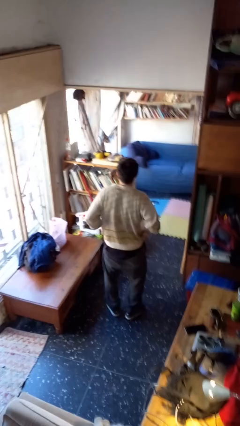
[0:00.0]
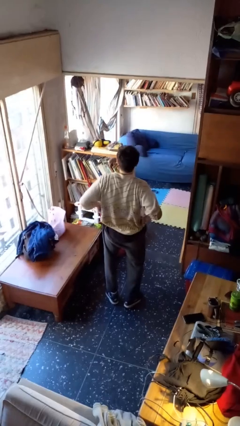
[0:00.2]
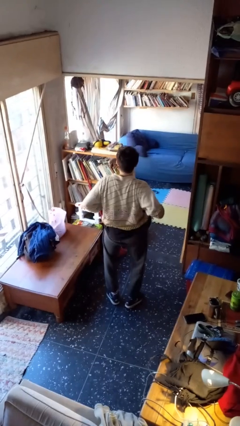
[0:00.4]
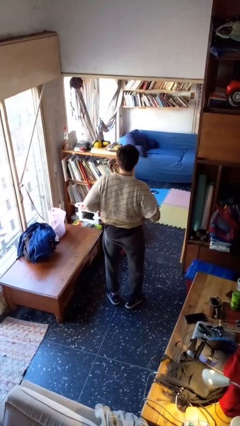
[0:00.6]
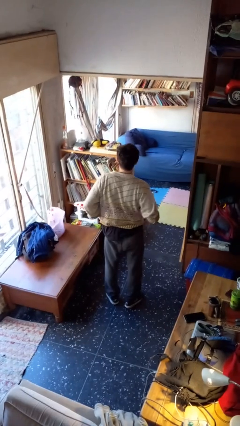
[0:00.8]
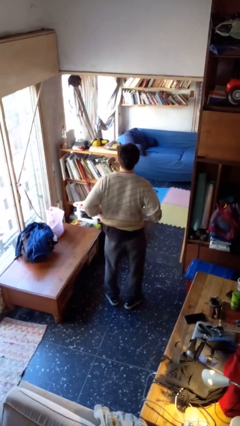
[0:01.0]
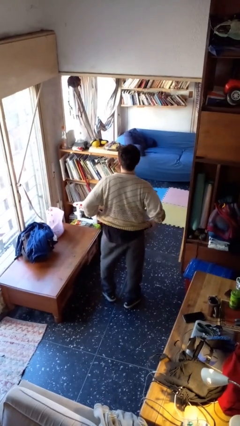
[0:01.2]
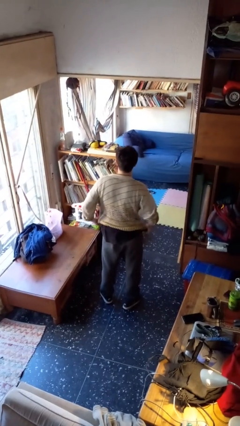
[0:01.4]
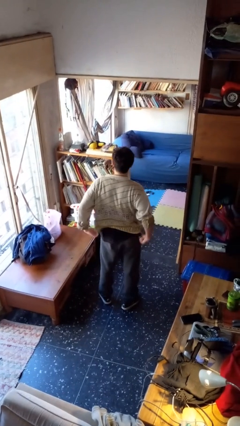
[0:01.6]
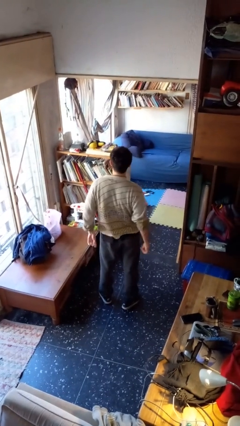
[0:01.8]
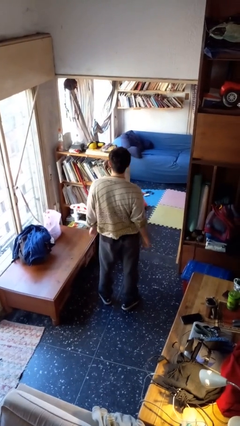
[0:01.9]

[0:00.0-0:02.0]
person hikes up pants

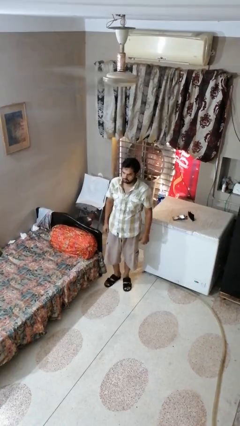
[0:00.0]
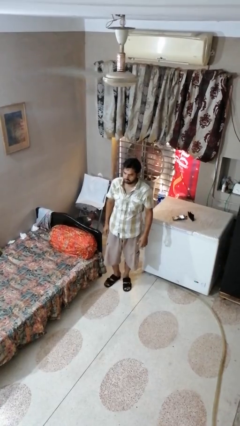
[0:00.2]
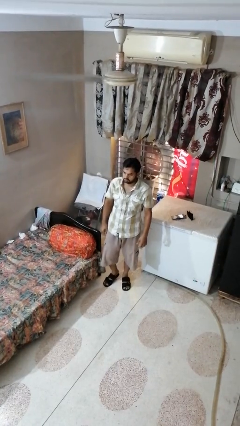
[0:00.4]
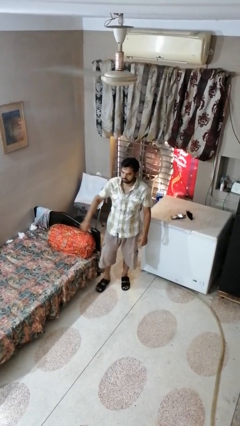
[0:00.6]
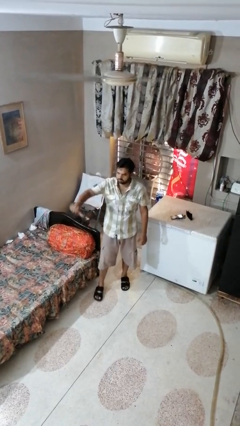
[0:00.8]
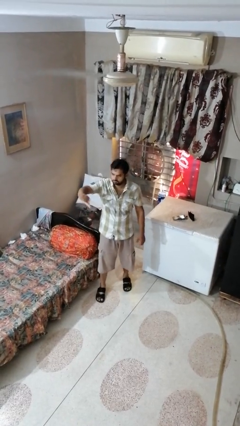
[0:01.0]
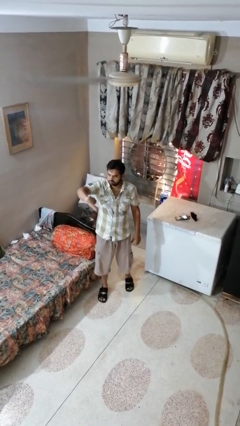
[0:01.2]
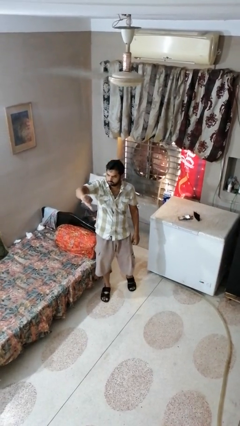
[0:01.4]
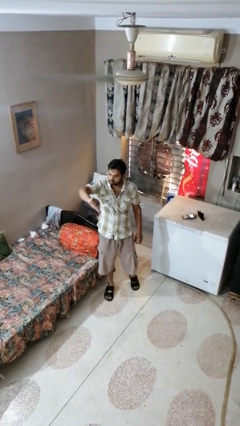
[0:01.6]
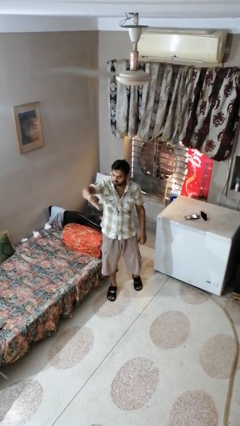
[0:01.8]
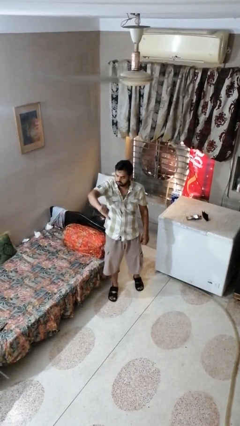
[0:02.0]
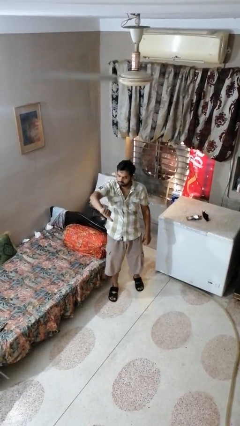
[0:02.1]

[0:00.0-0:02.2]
person gestures thumbs down

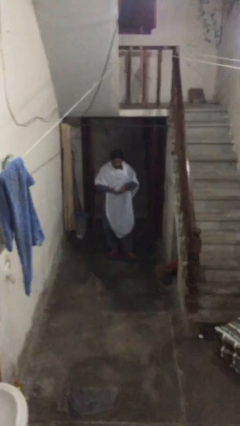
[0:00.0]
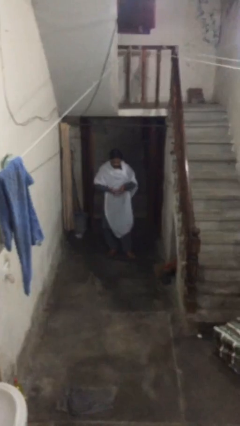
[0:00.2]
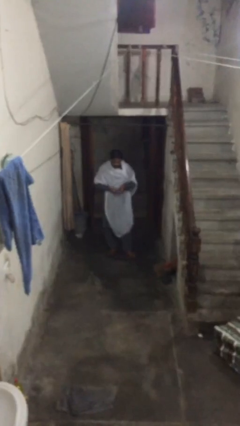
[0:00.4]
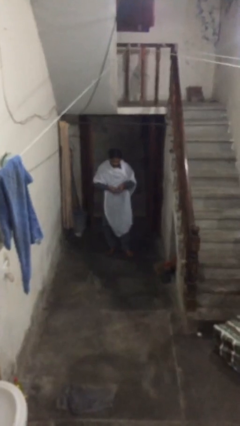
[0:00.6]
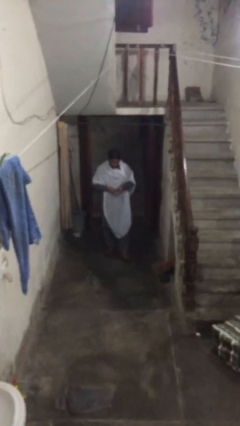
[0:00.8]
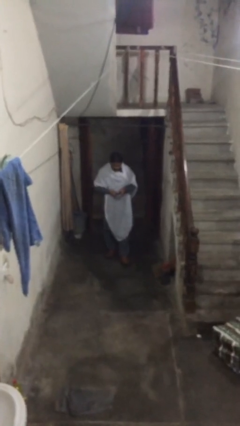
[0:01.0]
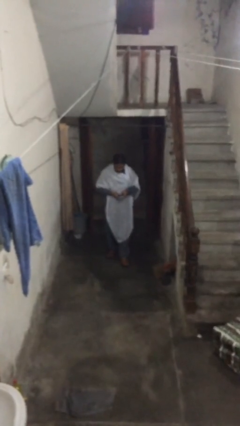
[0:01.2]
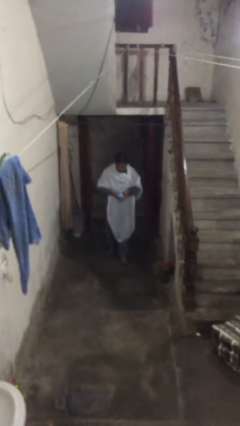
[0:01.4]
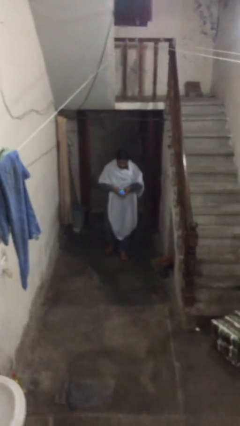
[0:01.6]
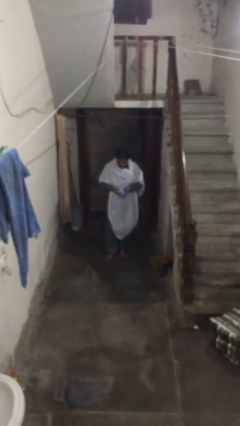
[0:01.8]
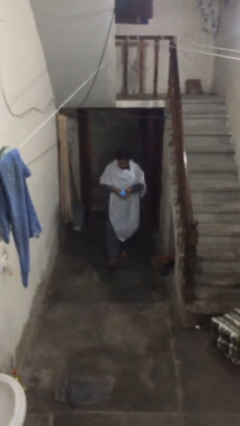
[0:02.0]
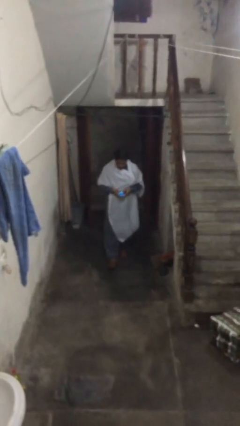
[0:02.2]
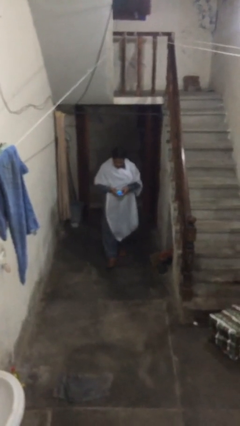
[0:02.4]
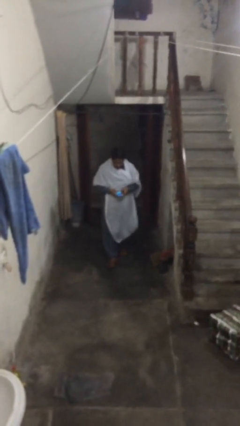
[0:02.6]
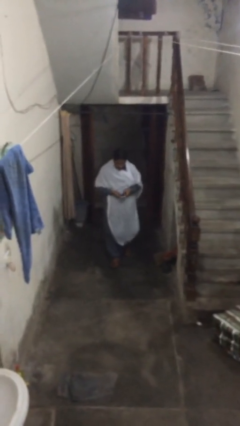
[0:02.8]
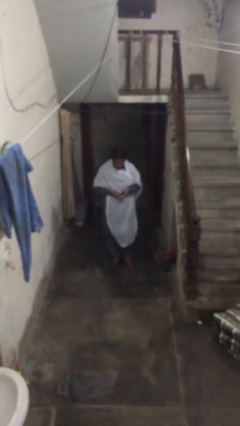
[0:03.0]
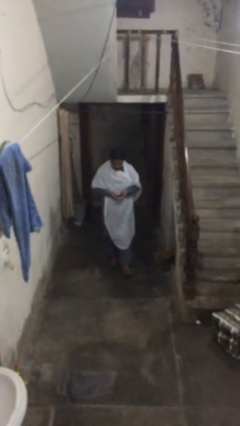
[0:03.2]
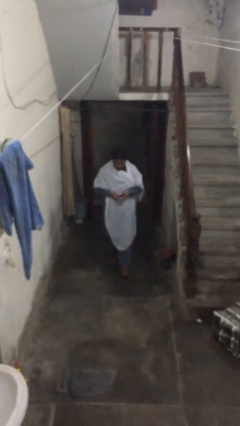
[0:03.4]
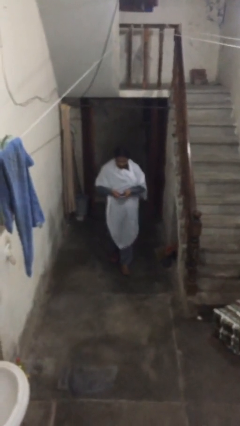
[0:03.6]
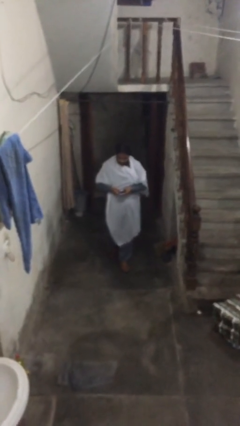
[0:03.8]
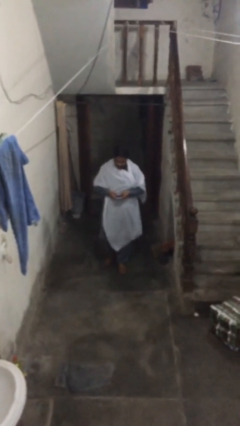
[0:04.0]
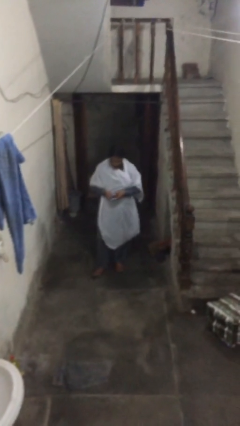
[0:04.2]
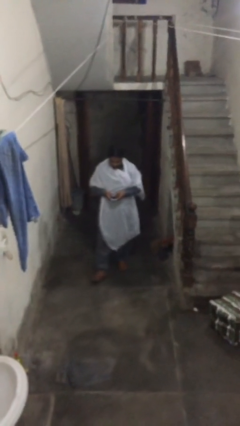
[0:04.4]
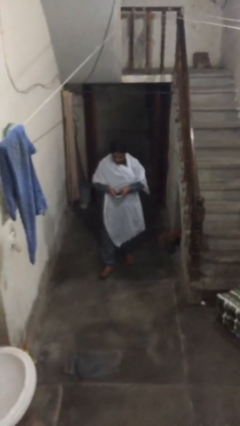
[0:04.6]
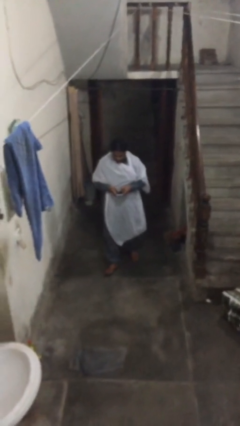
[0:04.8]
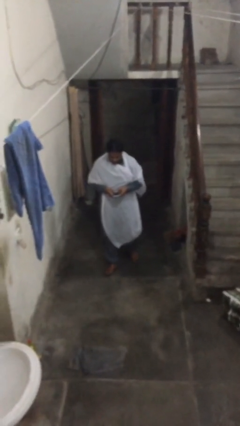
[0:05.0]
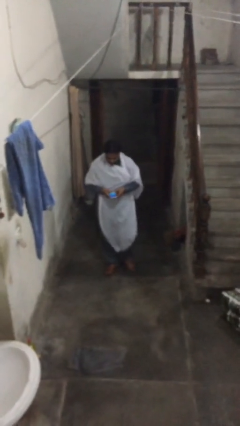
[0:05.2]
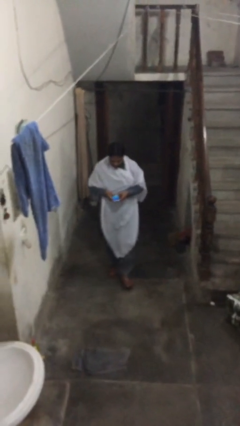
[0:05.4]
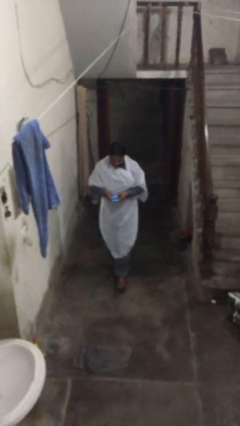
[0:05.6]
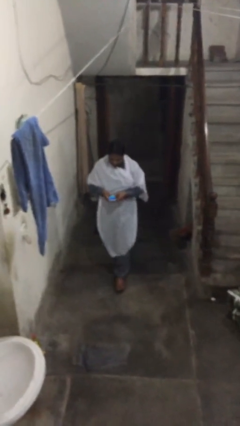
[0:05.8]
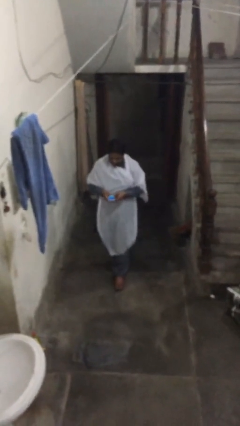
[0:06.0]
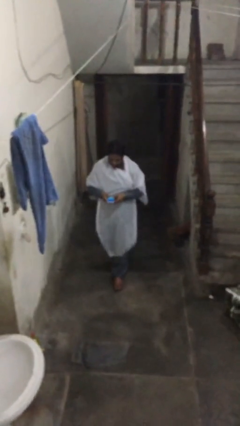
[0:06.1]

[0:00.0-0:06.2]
person texts on phone

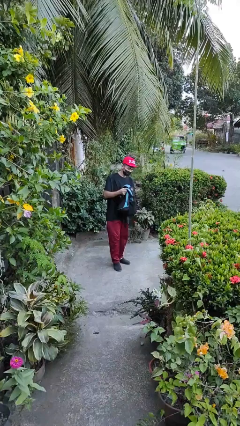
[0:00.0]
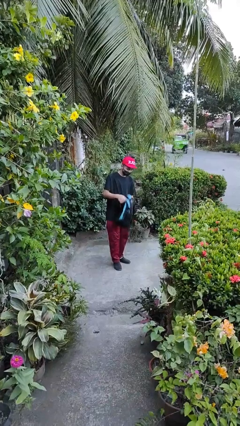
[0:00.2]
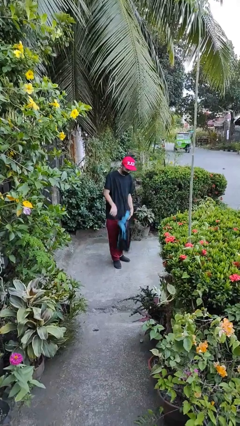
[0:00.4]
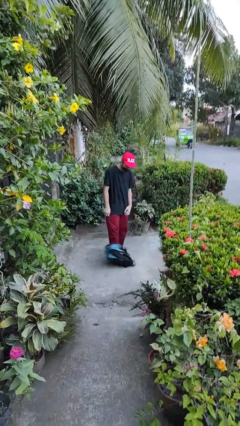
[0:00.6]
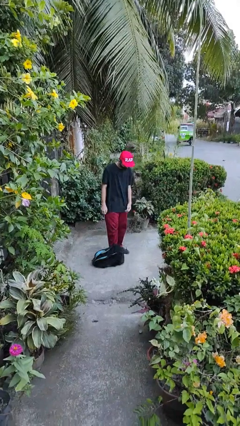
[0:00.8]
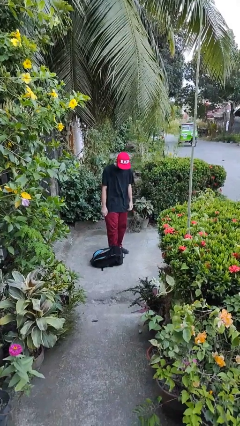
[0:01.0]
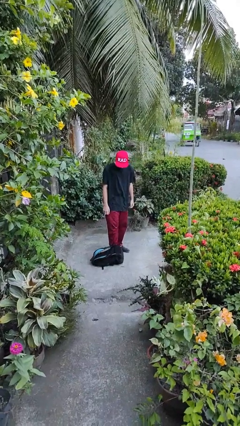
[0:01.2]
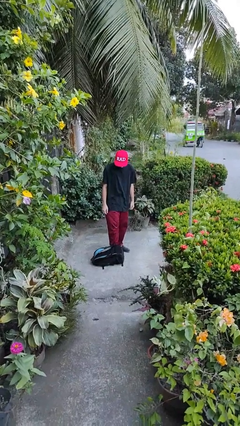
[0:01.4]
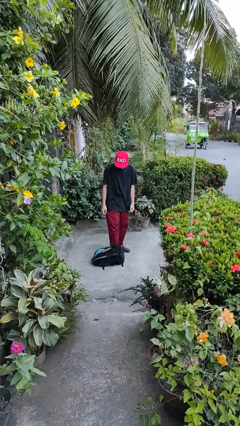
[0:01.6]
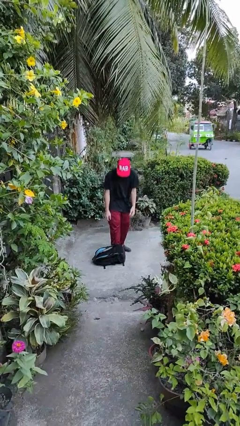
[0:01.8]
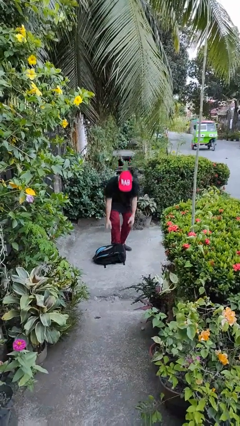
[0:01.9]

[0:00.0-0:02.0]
person drops object

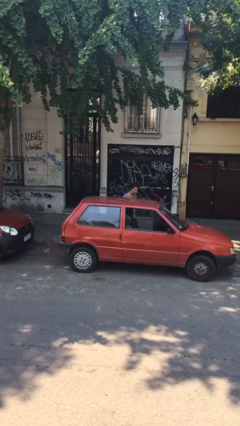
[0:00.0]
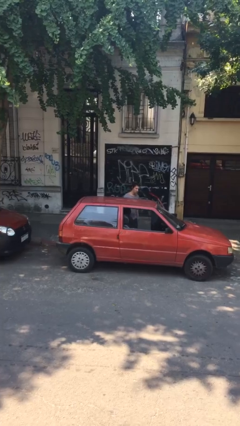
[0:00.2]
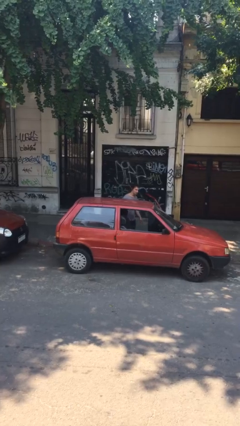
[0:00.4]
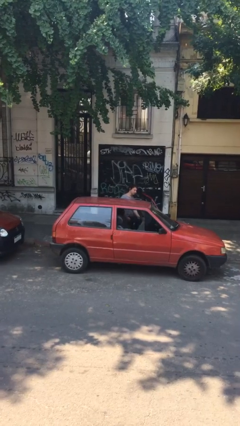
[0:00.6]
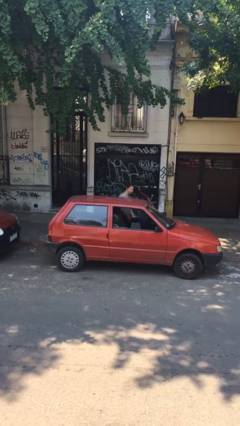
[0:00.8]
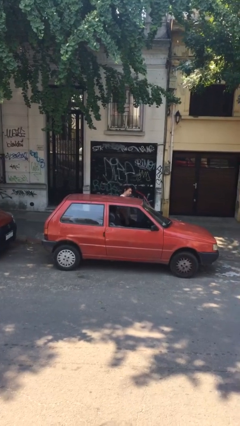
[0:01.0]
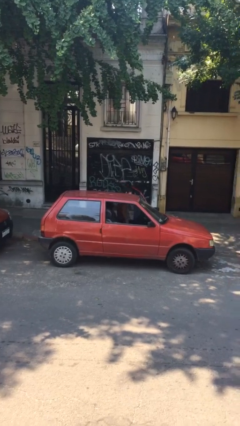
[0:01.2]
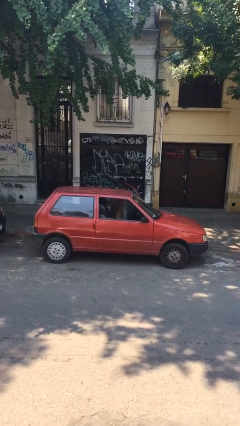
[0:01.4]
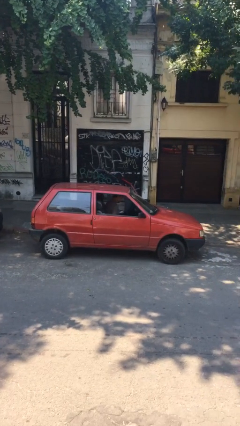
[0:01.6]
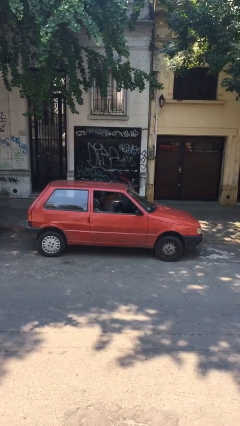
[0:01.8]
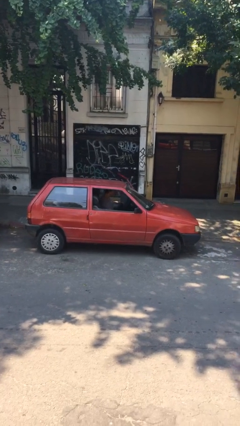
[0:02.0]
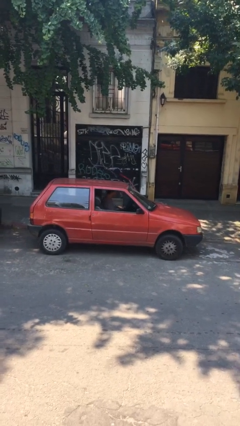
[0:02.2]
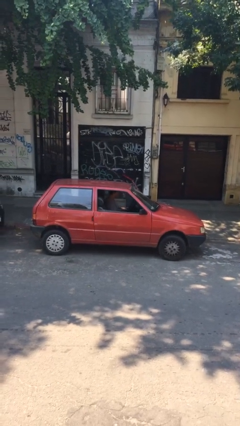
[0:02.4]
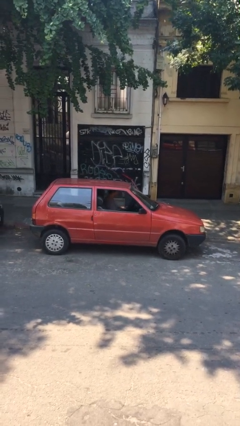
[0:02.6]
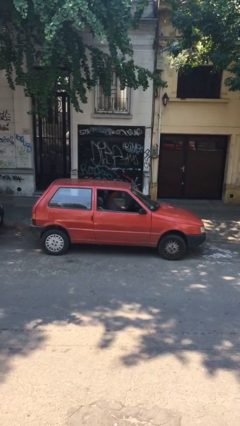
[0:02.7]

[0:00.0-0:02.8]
person enters car

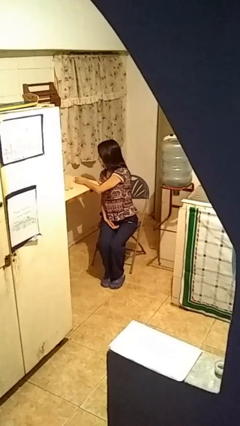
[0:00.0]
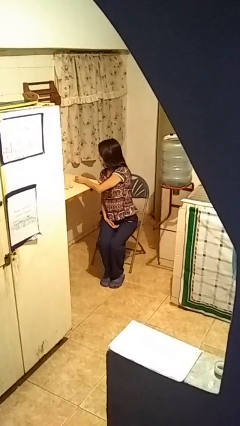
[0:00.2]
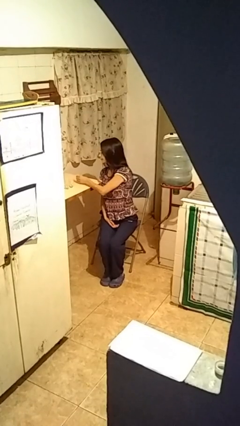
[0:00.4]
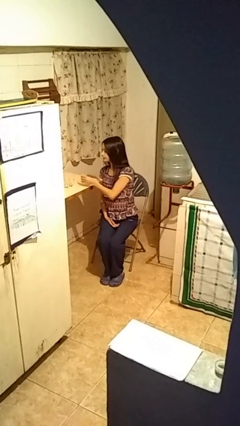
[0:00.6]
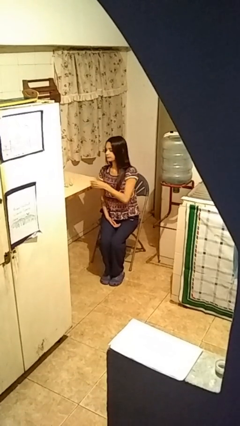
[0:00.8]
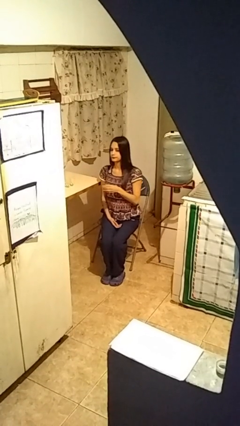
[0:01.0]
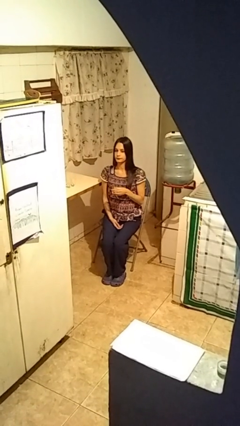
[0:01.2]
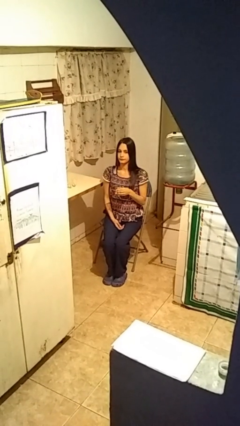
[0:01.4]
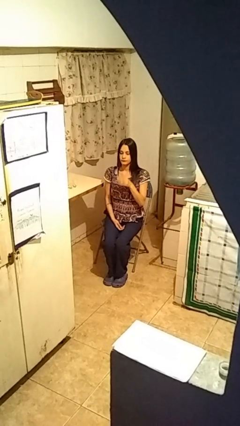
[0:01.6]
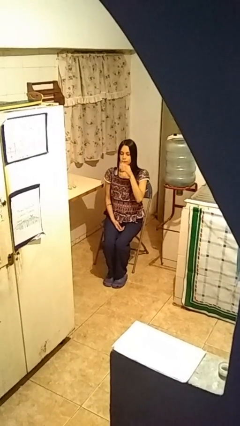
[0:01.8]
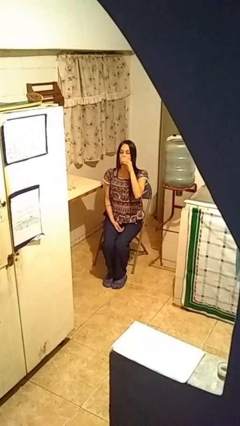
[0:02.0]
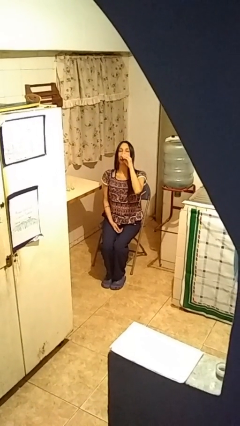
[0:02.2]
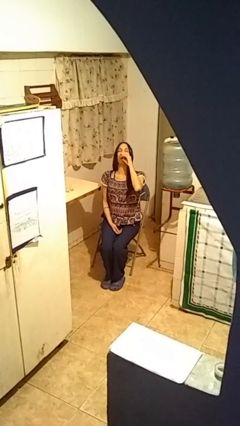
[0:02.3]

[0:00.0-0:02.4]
person picks up object from table

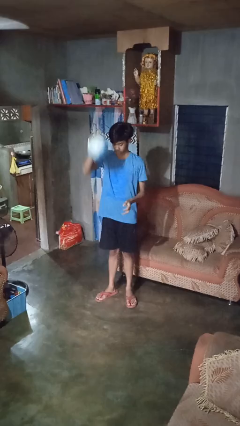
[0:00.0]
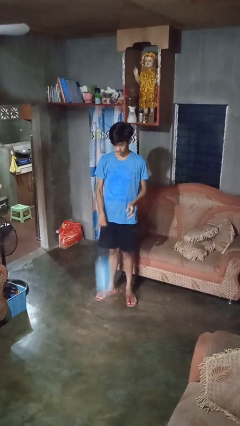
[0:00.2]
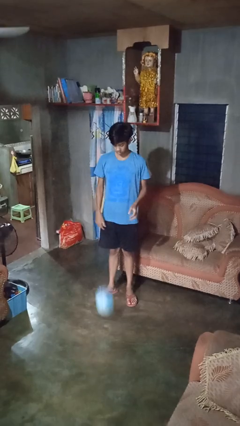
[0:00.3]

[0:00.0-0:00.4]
person bounces ball on floor
